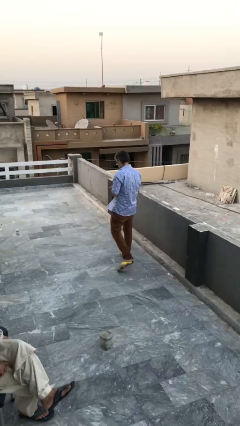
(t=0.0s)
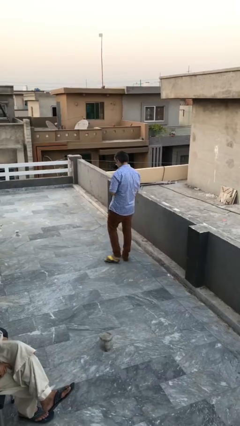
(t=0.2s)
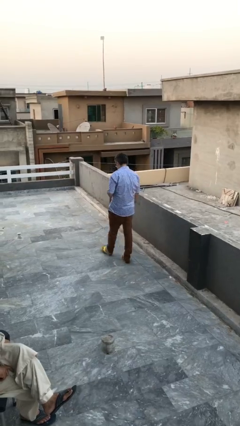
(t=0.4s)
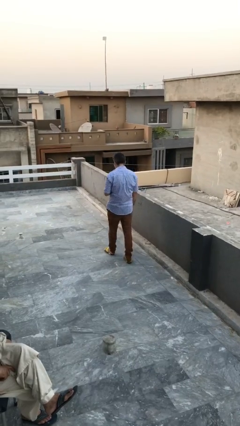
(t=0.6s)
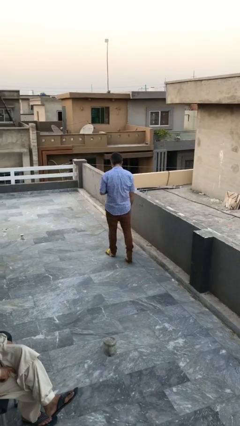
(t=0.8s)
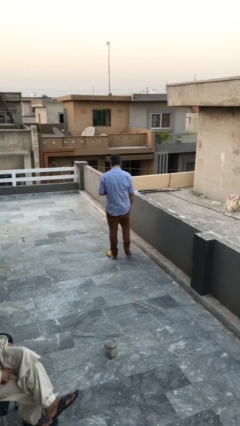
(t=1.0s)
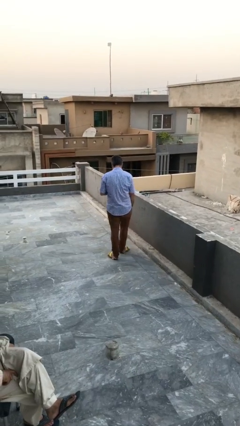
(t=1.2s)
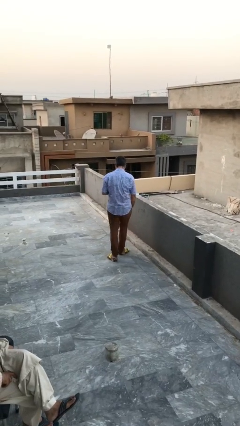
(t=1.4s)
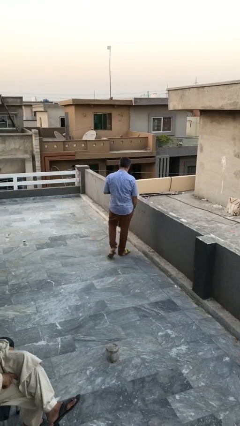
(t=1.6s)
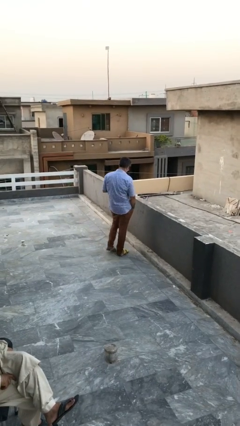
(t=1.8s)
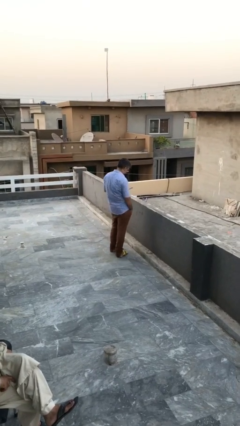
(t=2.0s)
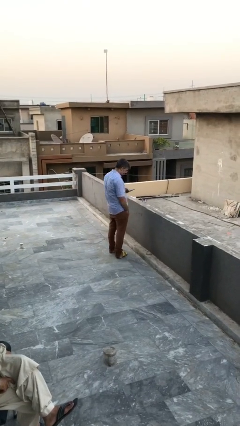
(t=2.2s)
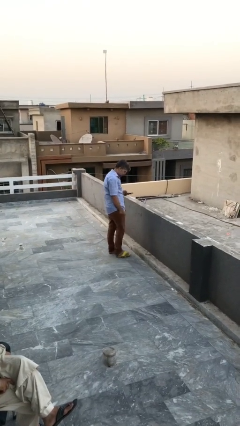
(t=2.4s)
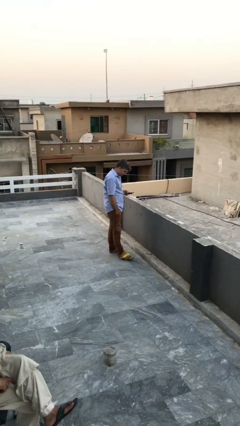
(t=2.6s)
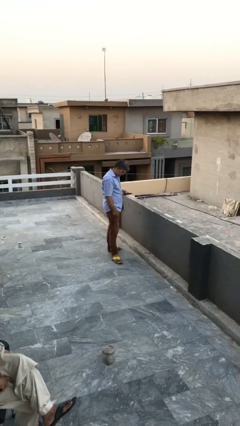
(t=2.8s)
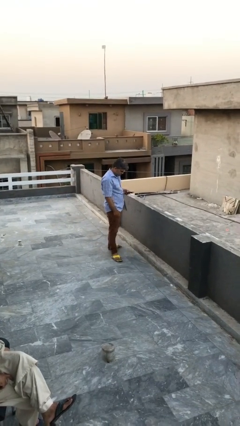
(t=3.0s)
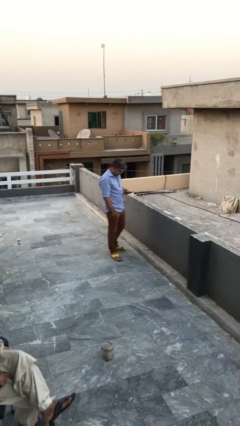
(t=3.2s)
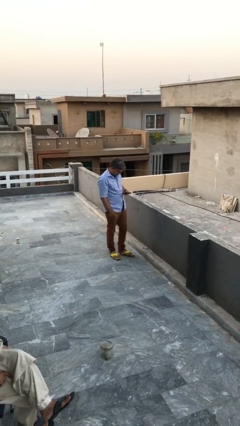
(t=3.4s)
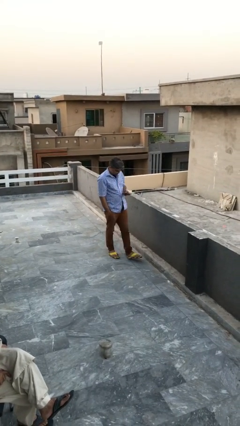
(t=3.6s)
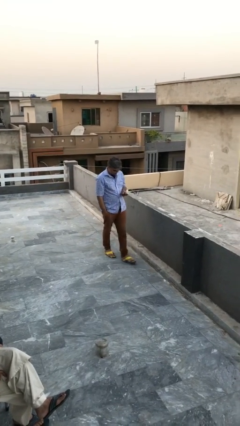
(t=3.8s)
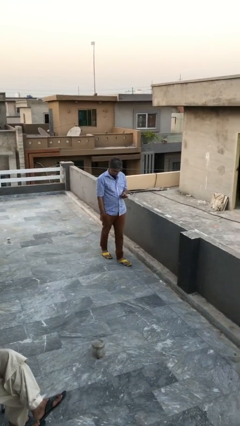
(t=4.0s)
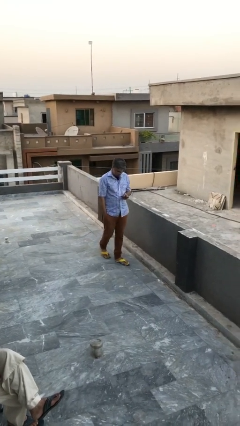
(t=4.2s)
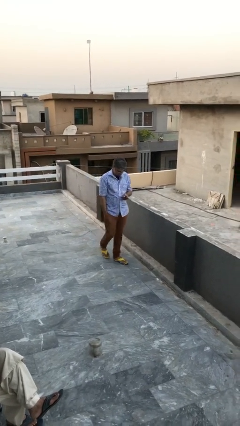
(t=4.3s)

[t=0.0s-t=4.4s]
person texts on phone

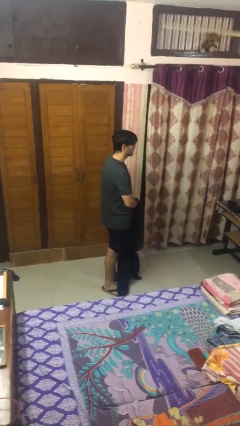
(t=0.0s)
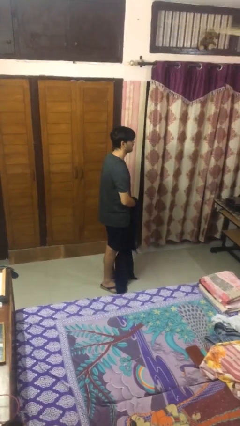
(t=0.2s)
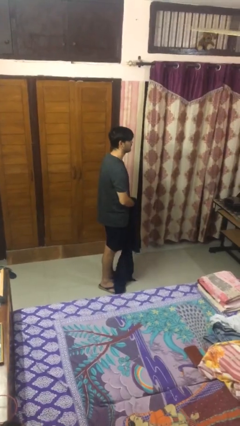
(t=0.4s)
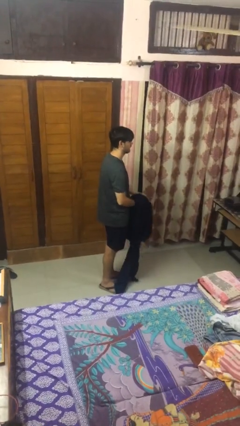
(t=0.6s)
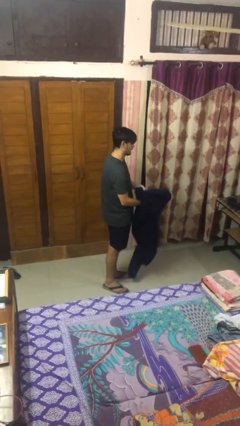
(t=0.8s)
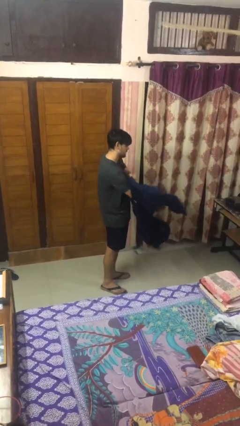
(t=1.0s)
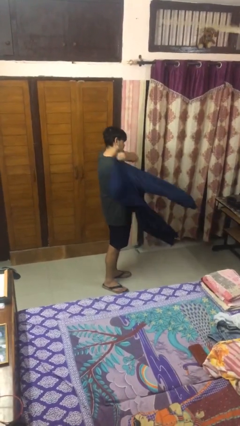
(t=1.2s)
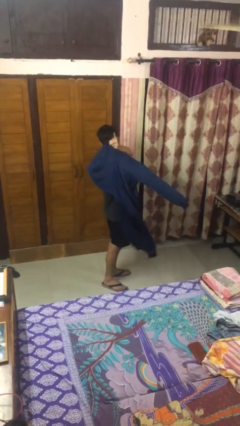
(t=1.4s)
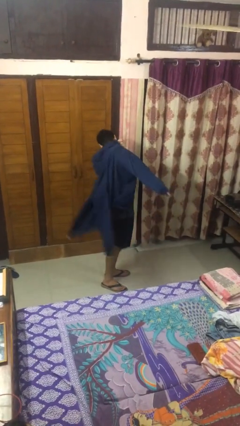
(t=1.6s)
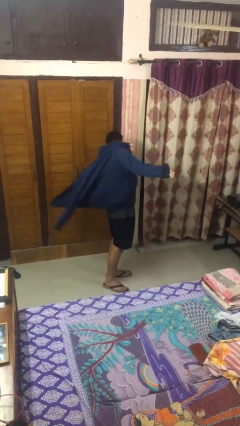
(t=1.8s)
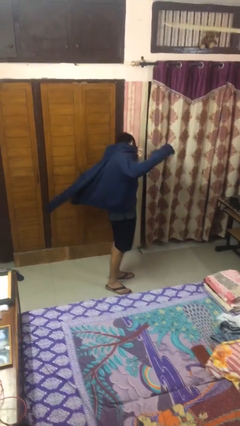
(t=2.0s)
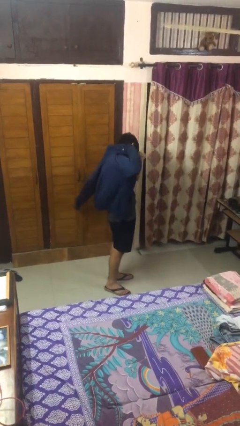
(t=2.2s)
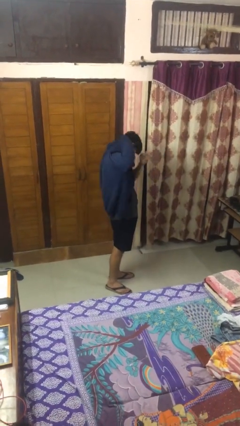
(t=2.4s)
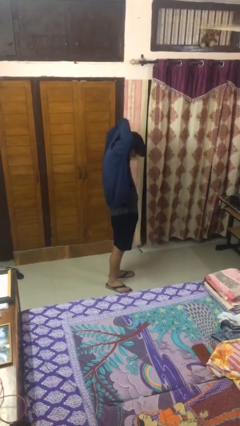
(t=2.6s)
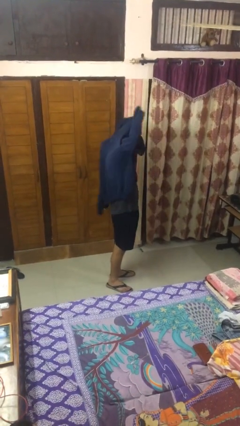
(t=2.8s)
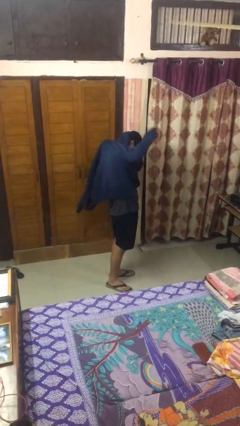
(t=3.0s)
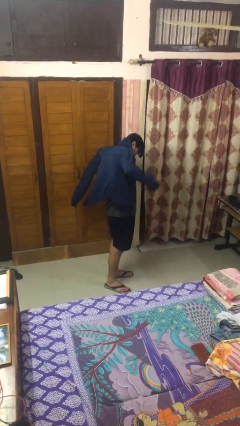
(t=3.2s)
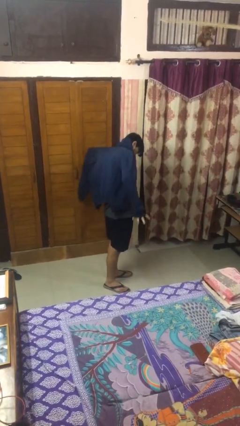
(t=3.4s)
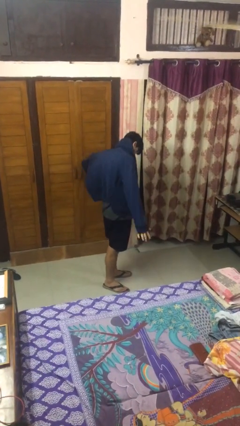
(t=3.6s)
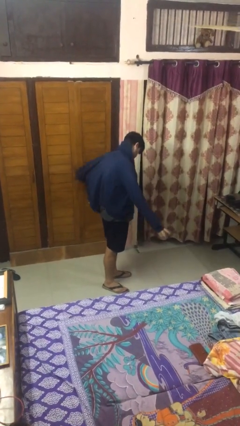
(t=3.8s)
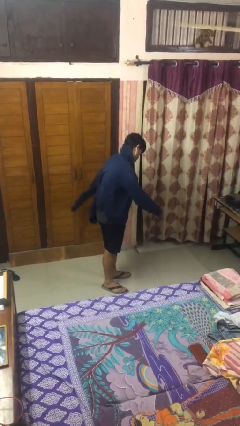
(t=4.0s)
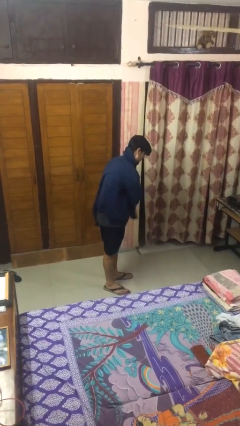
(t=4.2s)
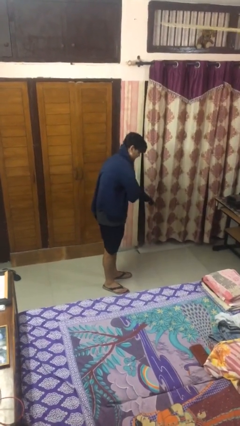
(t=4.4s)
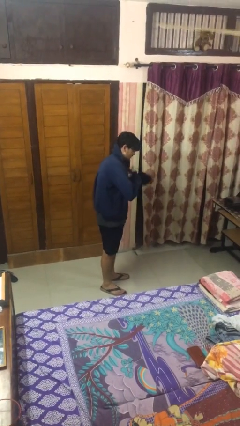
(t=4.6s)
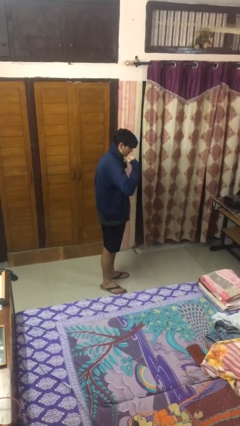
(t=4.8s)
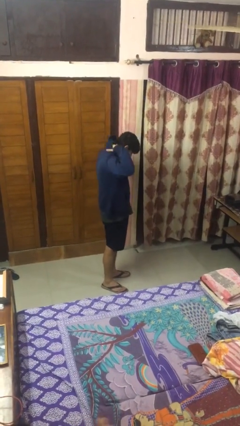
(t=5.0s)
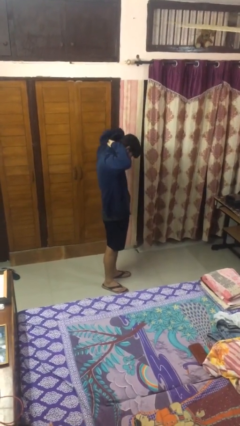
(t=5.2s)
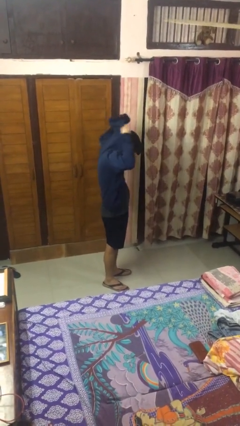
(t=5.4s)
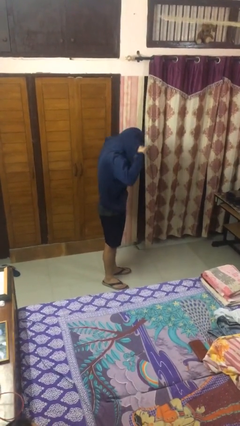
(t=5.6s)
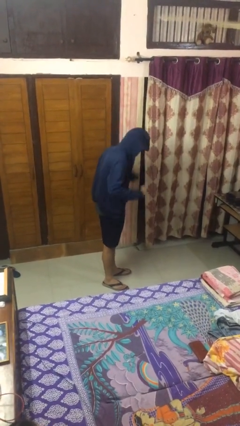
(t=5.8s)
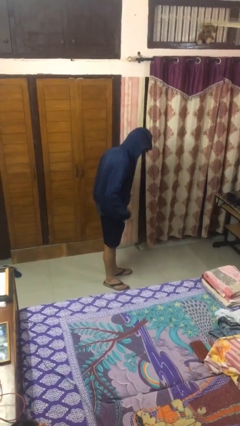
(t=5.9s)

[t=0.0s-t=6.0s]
person puts on hoodie

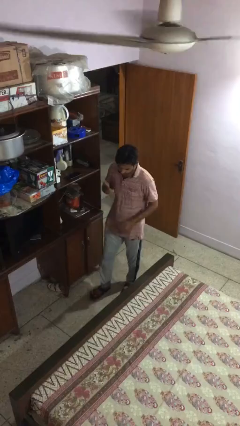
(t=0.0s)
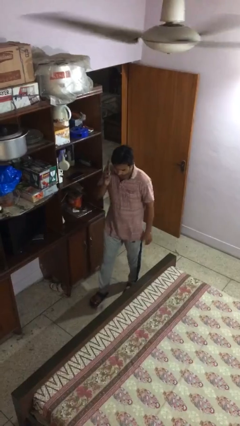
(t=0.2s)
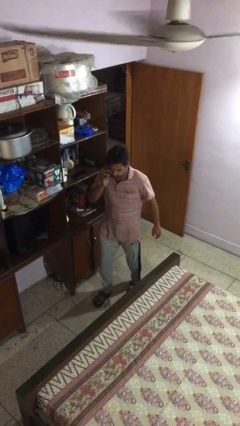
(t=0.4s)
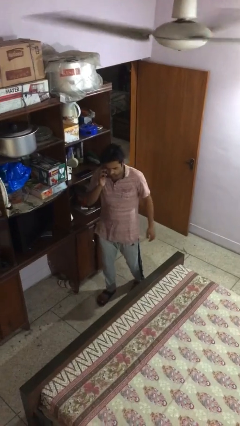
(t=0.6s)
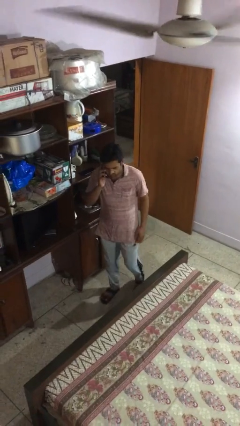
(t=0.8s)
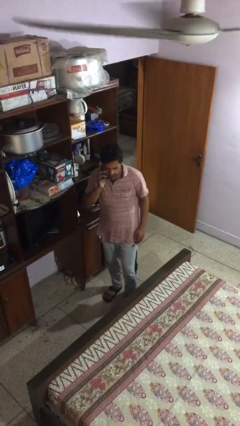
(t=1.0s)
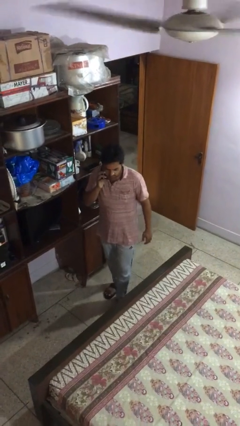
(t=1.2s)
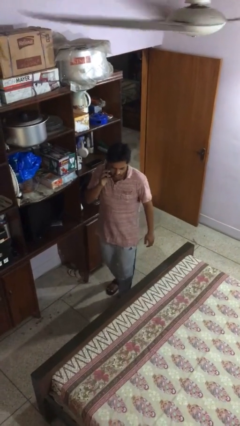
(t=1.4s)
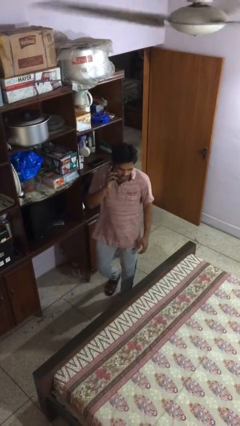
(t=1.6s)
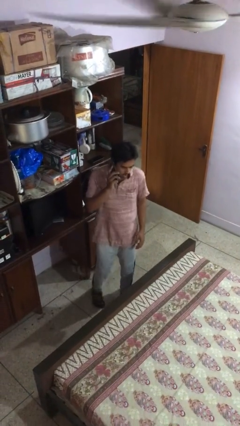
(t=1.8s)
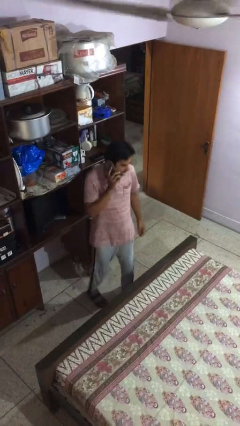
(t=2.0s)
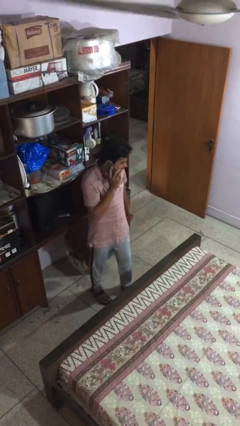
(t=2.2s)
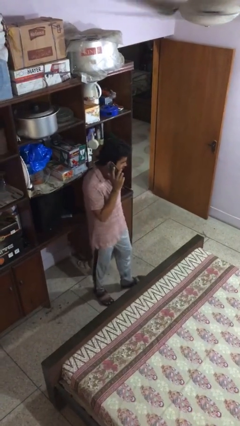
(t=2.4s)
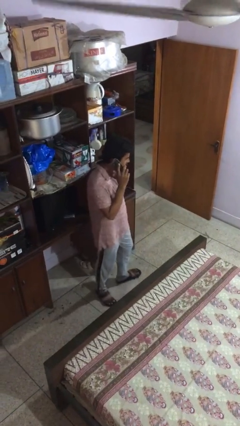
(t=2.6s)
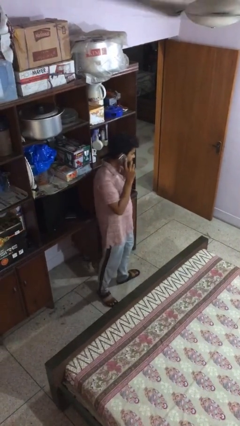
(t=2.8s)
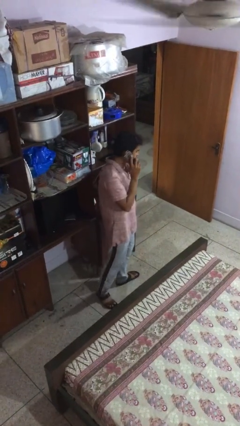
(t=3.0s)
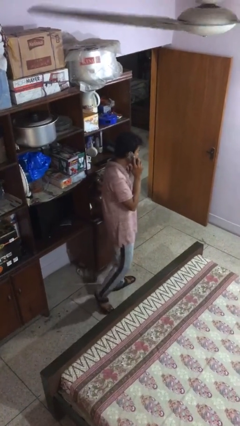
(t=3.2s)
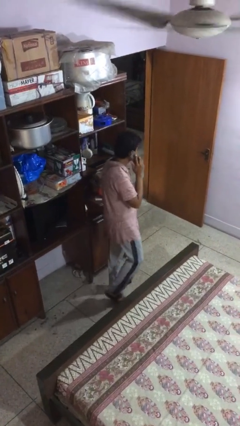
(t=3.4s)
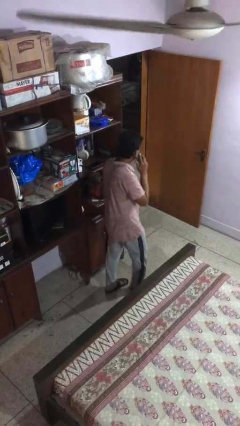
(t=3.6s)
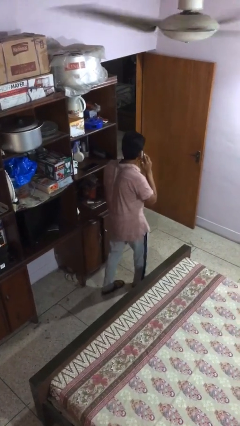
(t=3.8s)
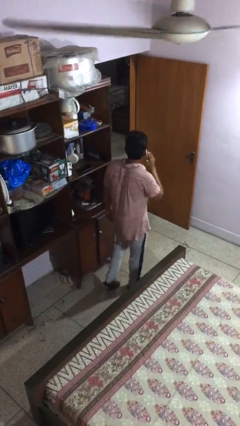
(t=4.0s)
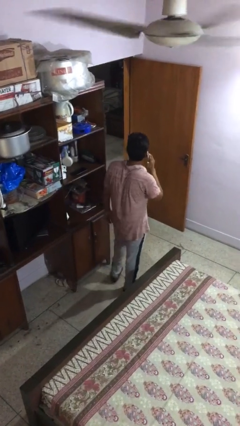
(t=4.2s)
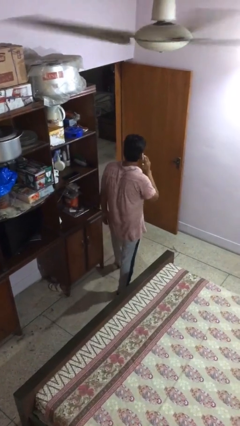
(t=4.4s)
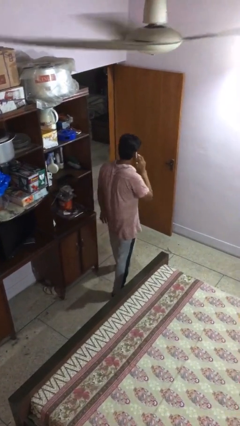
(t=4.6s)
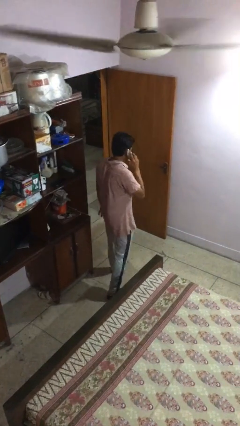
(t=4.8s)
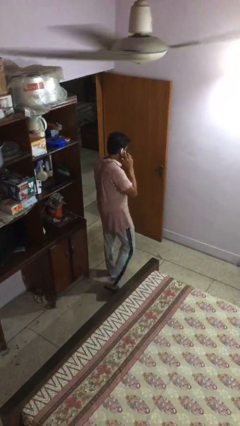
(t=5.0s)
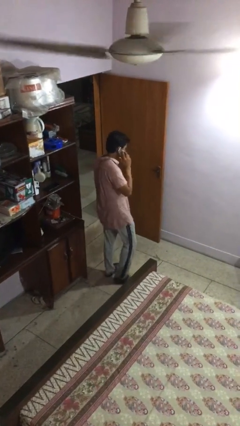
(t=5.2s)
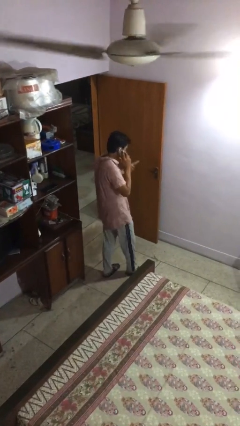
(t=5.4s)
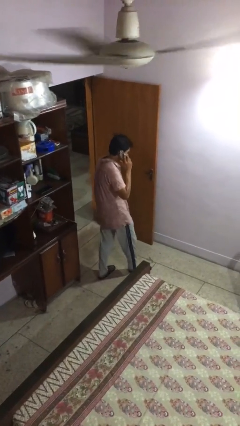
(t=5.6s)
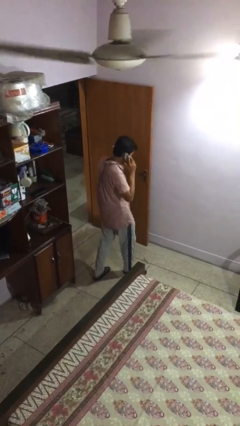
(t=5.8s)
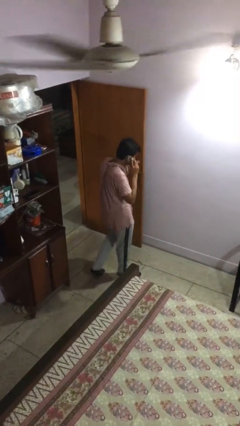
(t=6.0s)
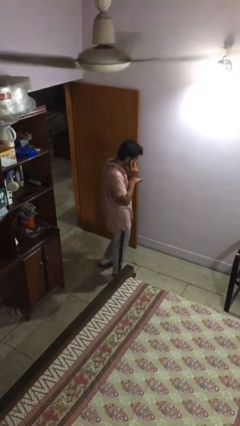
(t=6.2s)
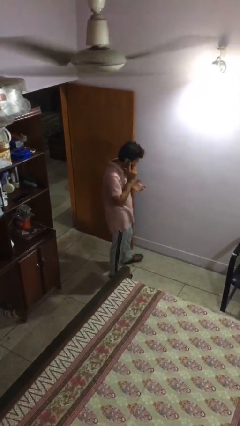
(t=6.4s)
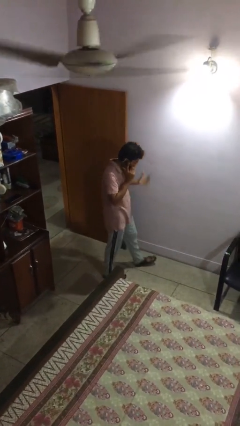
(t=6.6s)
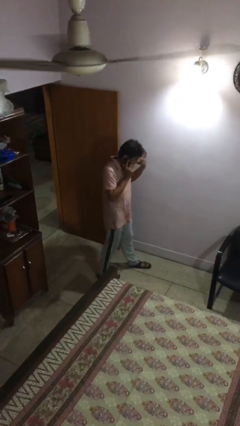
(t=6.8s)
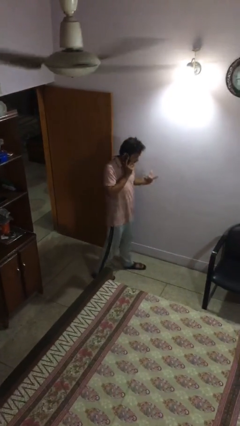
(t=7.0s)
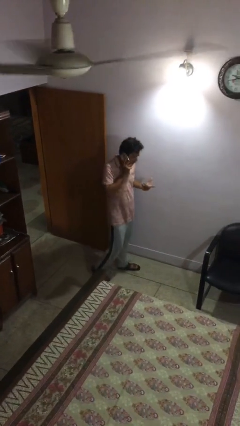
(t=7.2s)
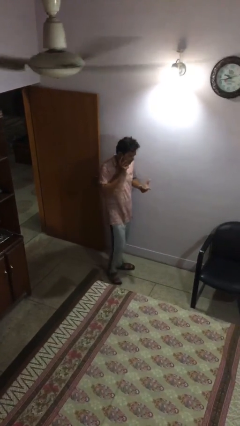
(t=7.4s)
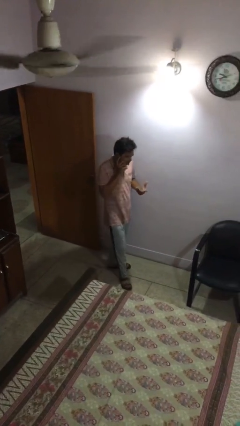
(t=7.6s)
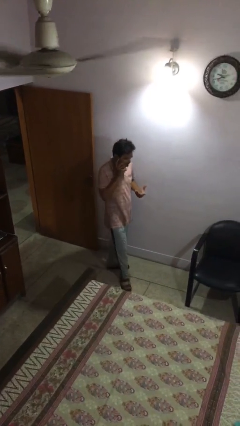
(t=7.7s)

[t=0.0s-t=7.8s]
person talks on phone

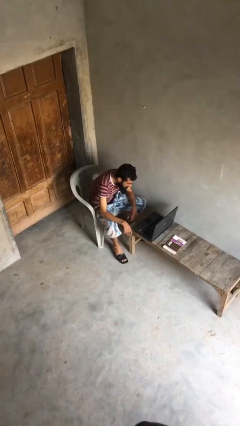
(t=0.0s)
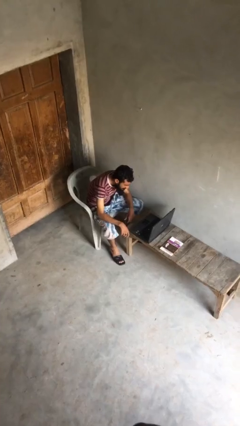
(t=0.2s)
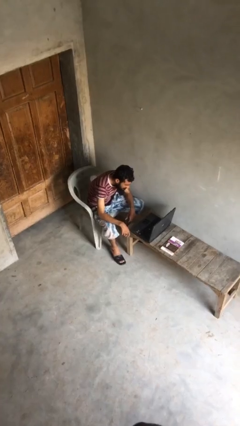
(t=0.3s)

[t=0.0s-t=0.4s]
person interacts with laptop
